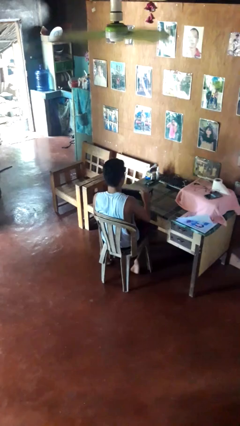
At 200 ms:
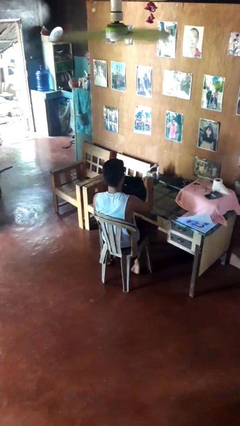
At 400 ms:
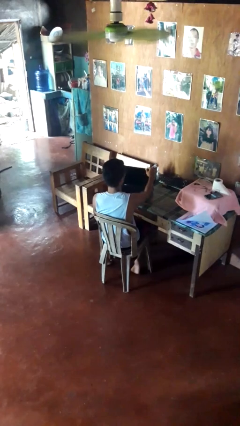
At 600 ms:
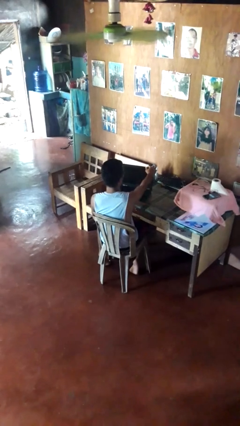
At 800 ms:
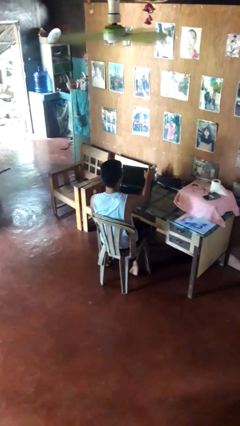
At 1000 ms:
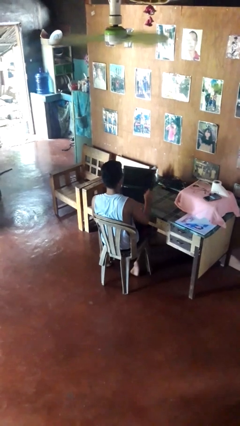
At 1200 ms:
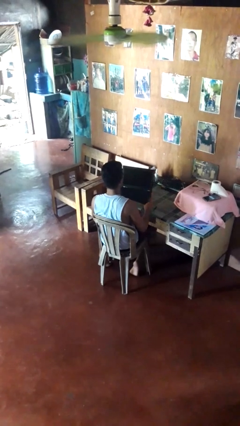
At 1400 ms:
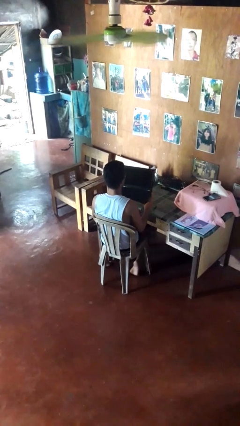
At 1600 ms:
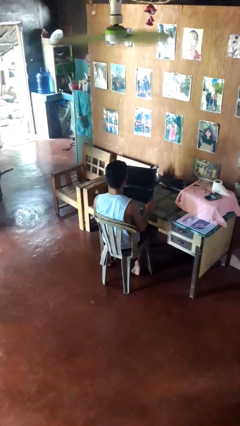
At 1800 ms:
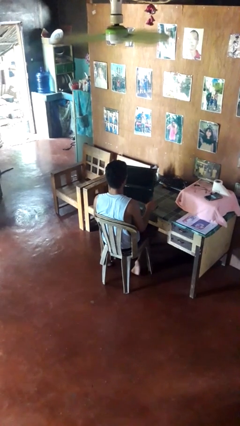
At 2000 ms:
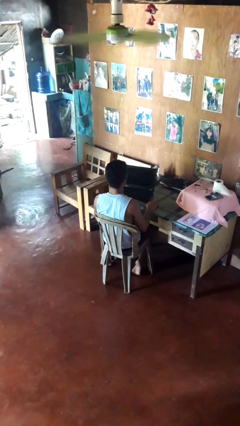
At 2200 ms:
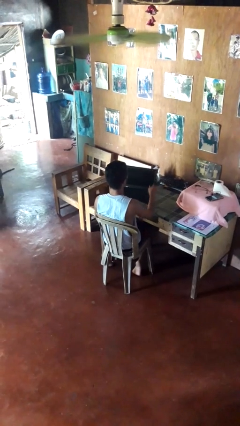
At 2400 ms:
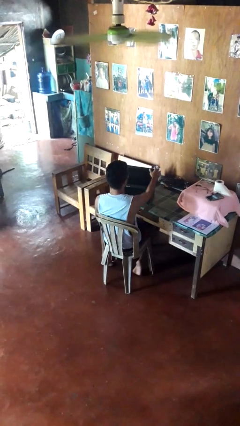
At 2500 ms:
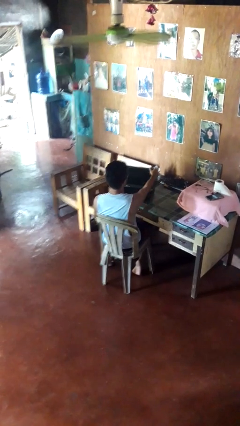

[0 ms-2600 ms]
person opens laptop

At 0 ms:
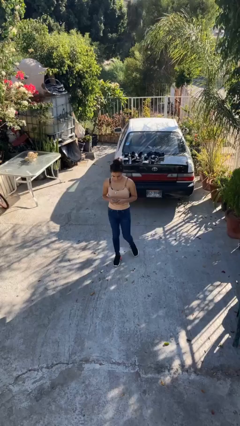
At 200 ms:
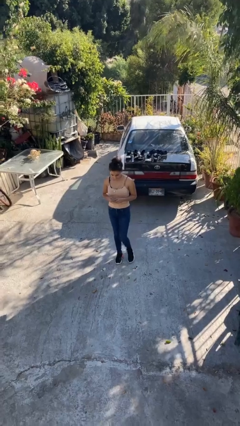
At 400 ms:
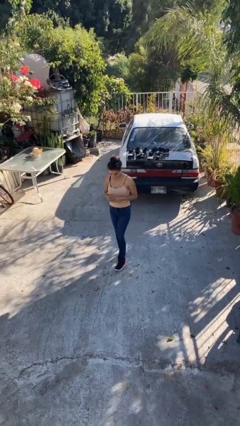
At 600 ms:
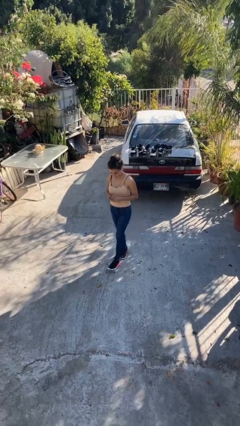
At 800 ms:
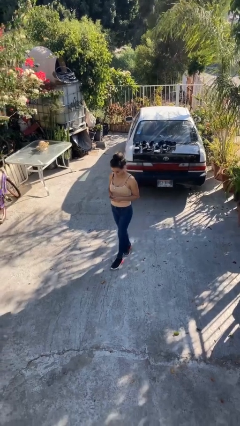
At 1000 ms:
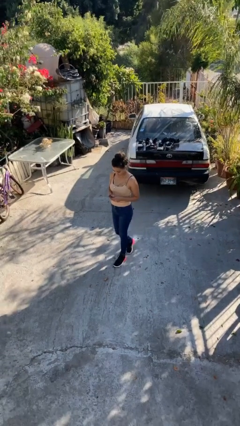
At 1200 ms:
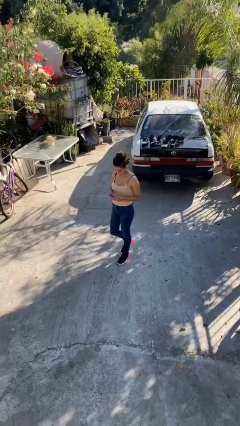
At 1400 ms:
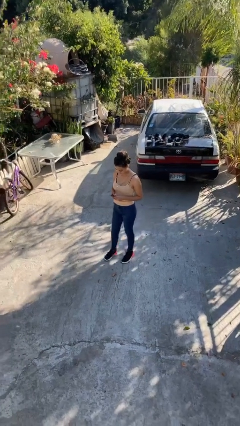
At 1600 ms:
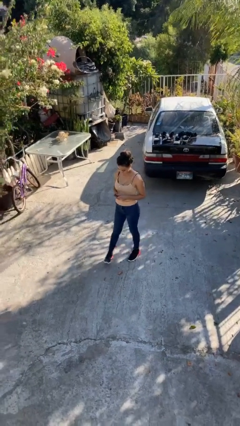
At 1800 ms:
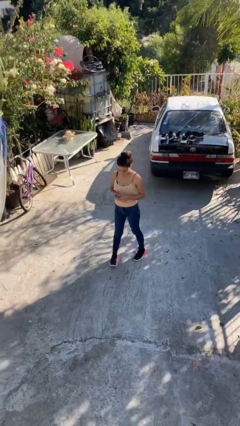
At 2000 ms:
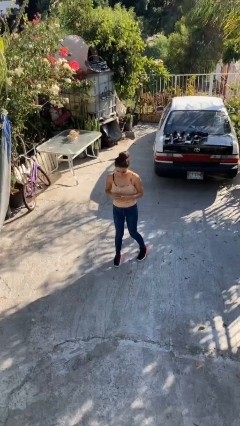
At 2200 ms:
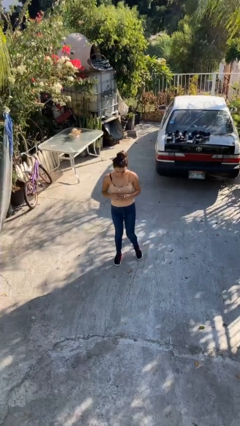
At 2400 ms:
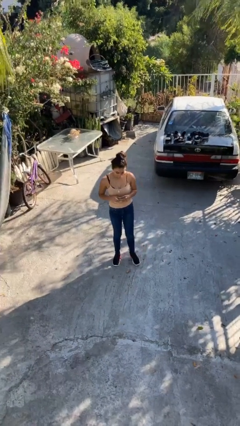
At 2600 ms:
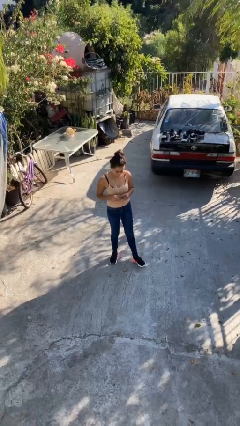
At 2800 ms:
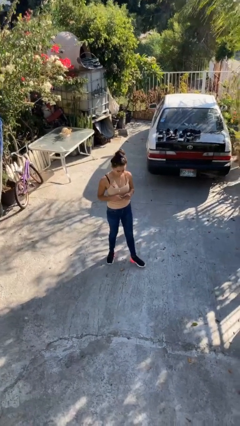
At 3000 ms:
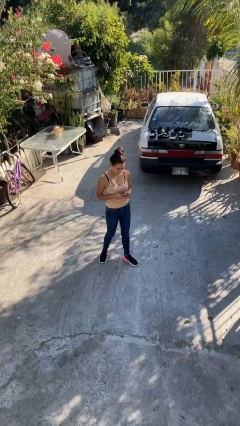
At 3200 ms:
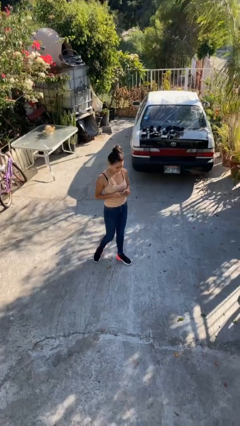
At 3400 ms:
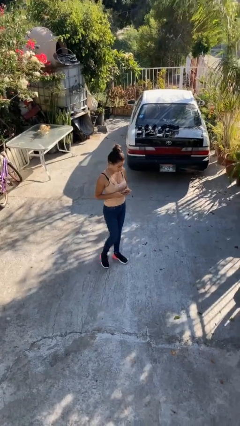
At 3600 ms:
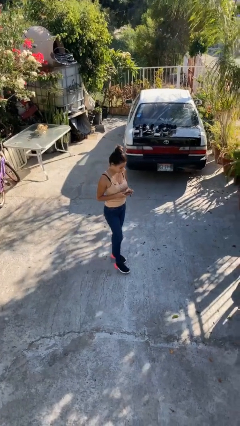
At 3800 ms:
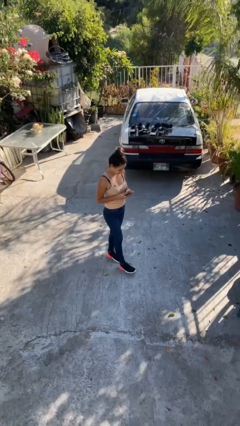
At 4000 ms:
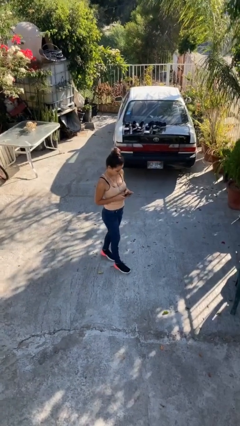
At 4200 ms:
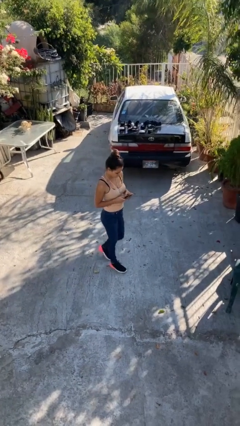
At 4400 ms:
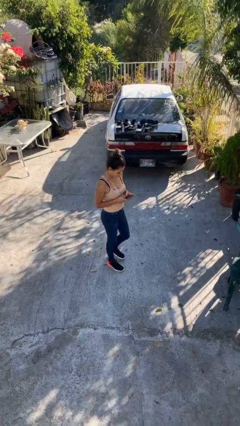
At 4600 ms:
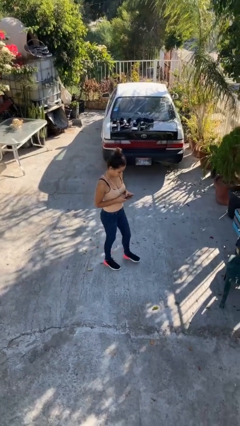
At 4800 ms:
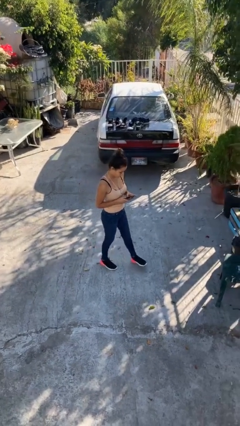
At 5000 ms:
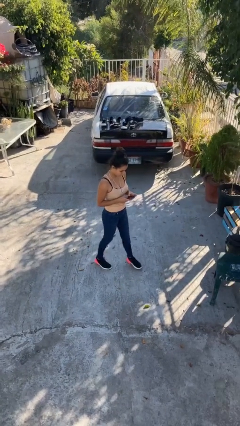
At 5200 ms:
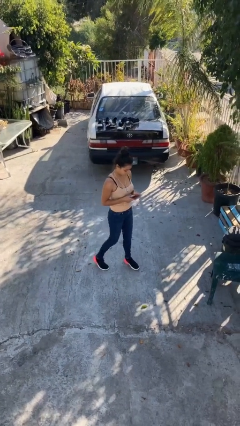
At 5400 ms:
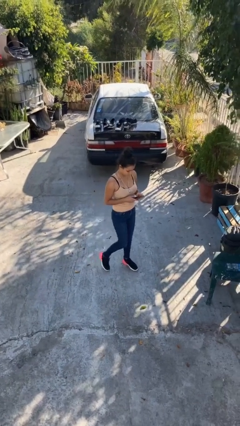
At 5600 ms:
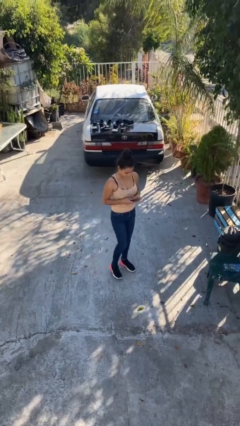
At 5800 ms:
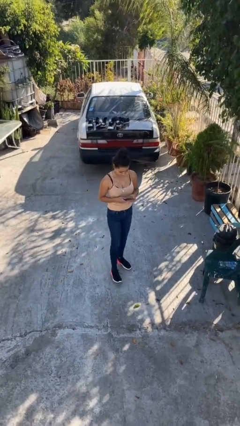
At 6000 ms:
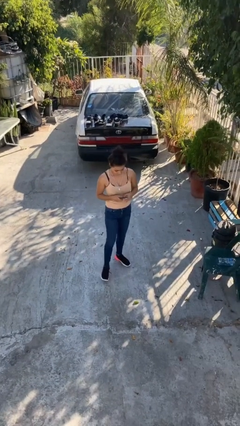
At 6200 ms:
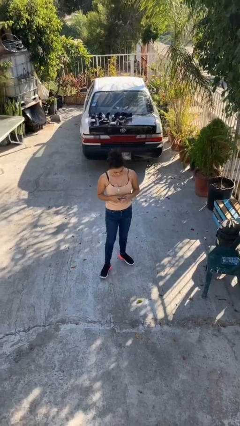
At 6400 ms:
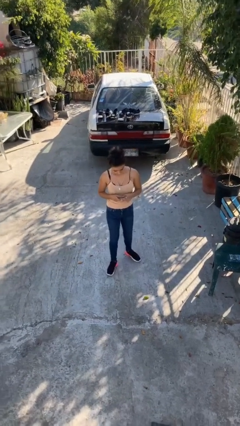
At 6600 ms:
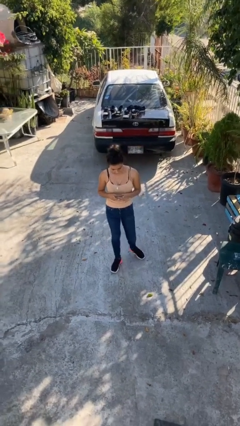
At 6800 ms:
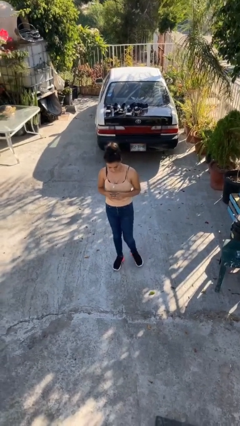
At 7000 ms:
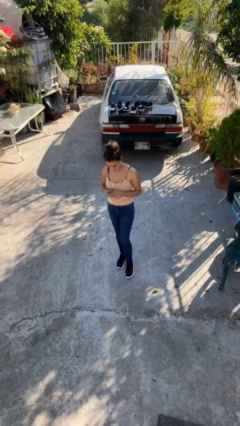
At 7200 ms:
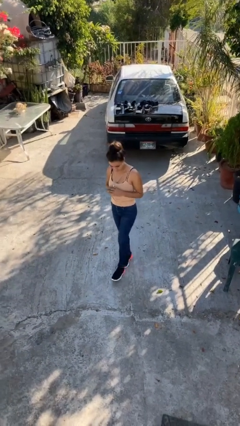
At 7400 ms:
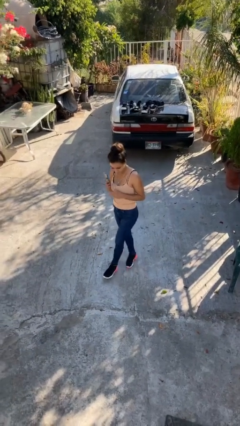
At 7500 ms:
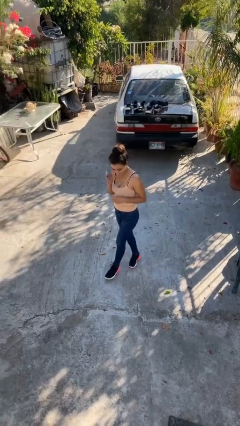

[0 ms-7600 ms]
person texts on phone

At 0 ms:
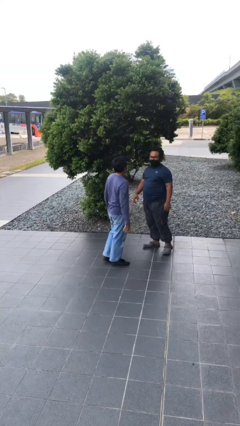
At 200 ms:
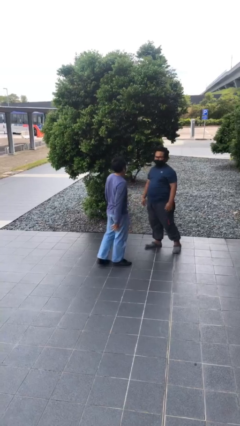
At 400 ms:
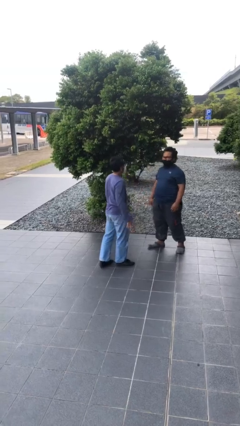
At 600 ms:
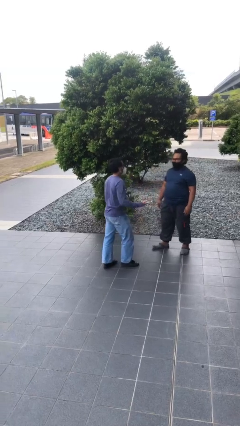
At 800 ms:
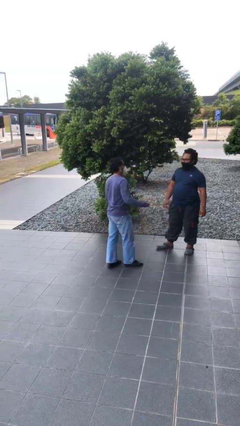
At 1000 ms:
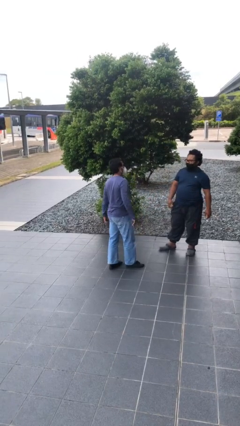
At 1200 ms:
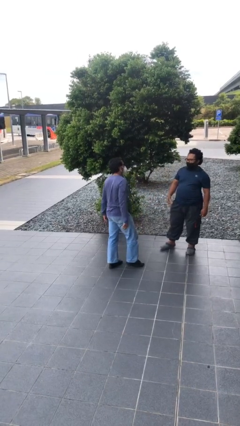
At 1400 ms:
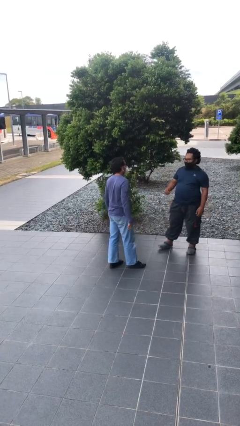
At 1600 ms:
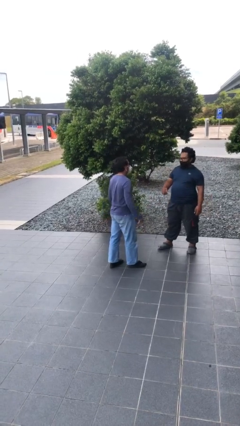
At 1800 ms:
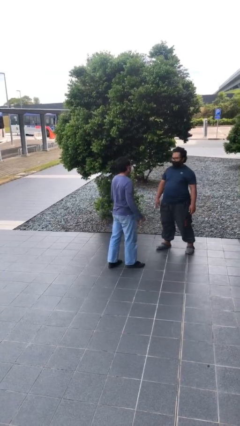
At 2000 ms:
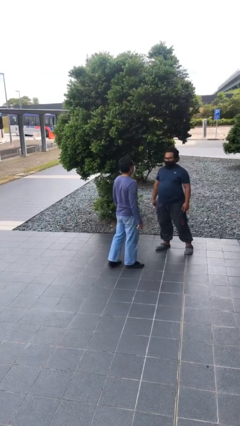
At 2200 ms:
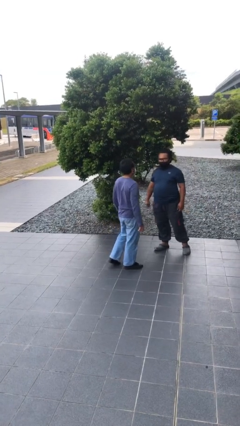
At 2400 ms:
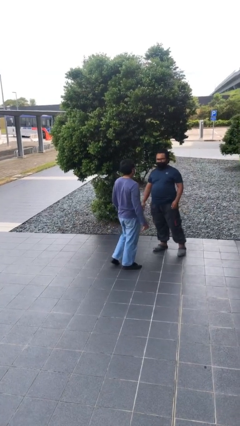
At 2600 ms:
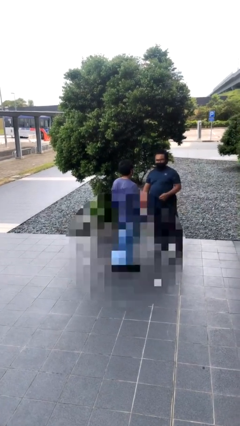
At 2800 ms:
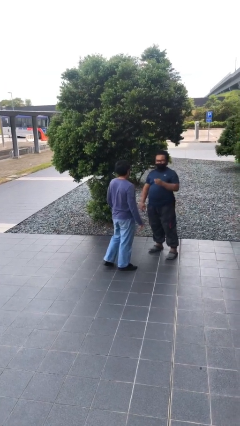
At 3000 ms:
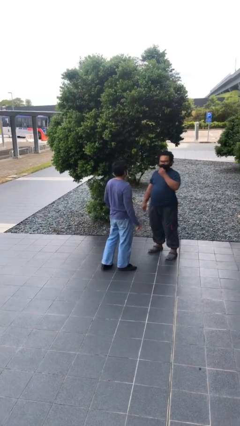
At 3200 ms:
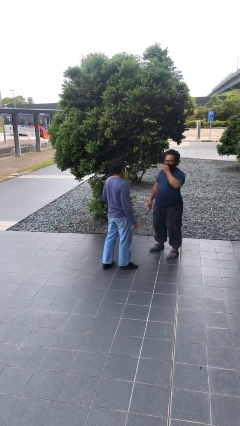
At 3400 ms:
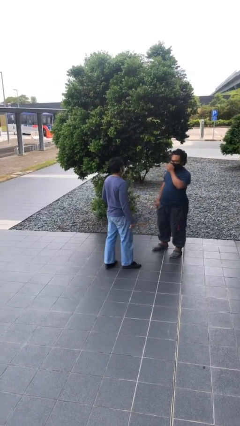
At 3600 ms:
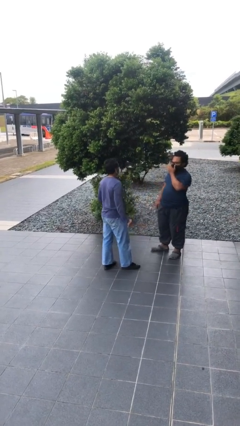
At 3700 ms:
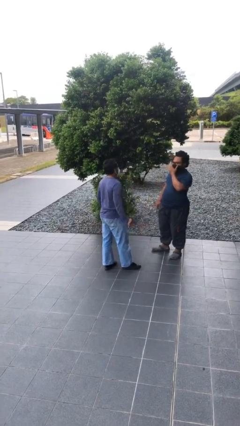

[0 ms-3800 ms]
person talks to person

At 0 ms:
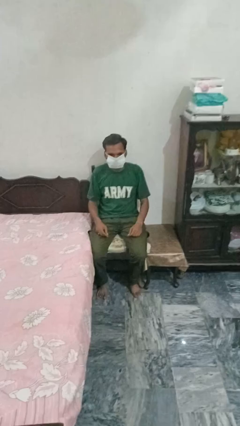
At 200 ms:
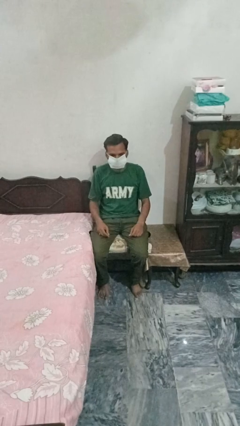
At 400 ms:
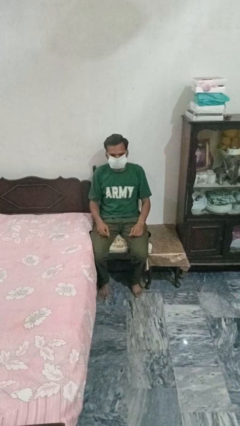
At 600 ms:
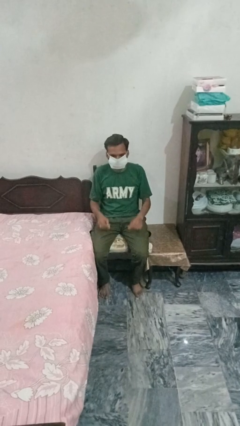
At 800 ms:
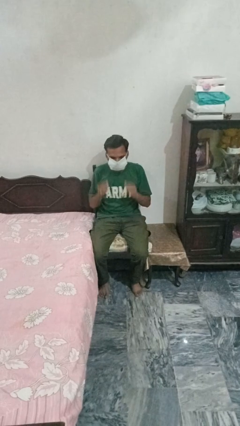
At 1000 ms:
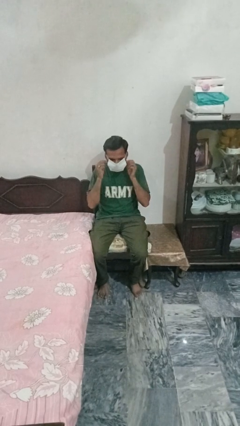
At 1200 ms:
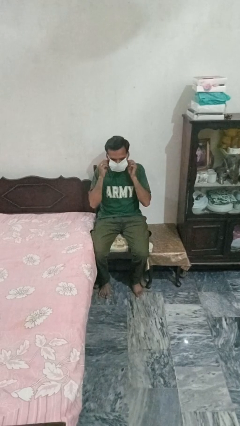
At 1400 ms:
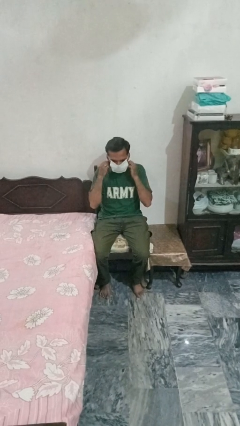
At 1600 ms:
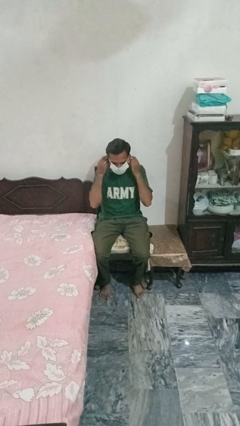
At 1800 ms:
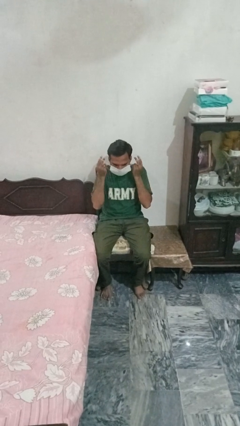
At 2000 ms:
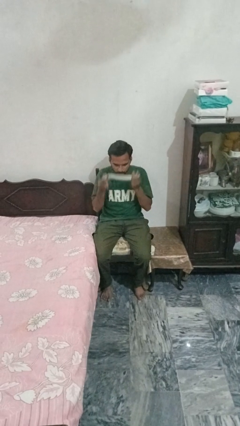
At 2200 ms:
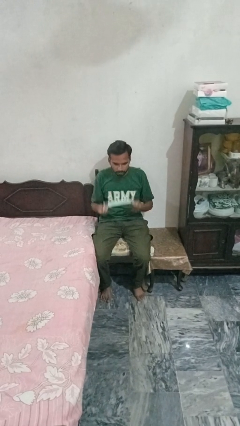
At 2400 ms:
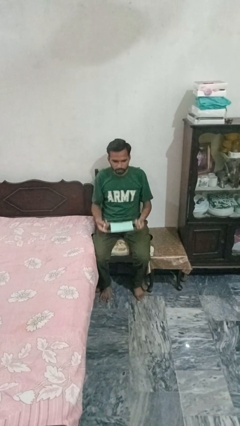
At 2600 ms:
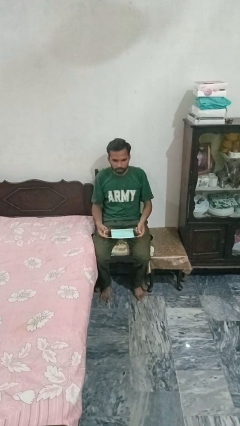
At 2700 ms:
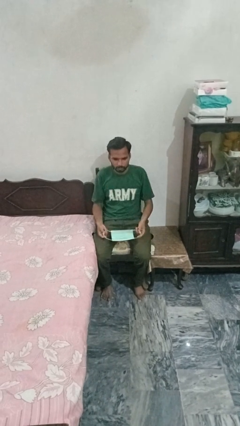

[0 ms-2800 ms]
person takes off facemask

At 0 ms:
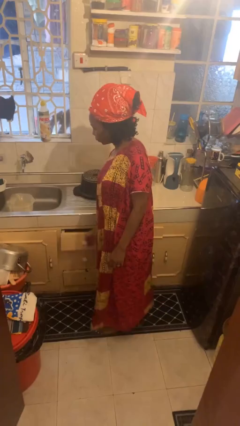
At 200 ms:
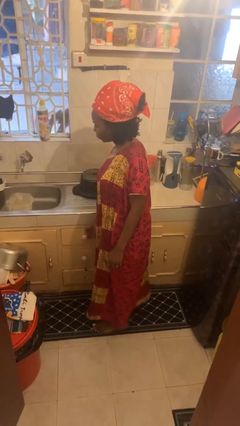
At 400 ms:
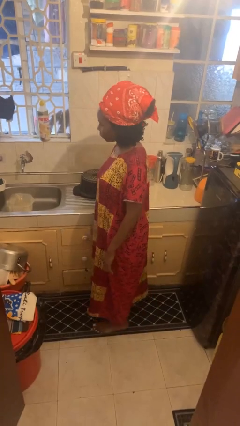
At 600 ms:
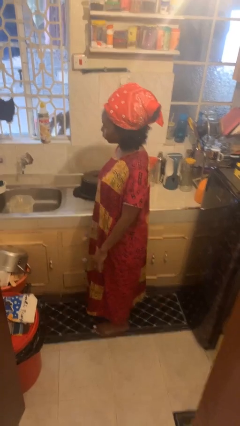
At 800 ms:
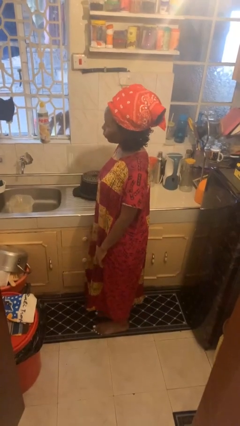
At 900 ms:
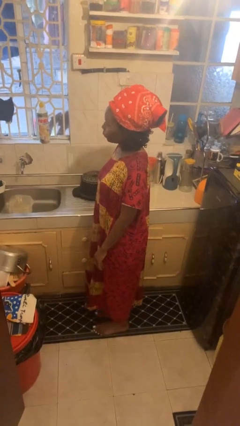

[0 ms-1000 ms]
person closes kitchen drawer
